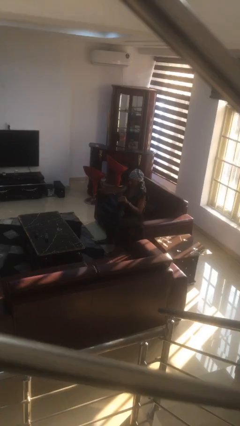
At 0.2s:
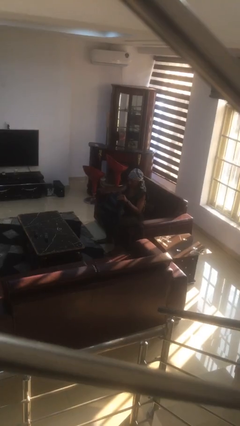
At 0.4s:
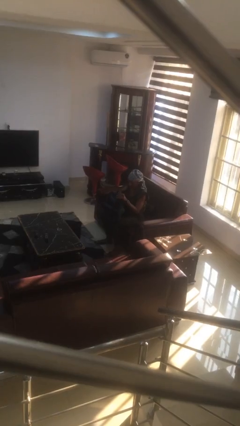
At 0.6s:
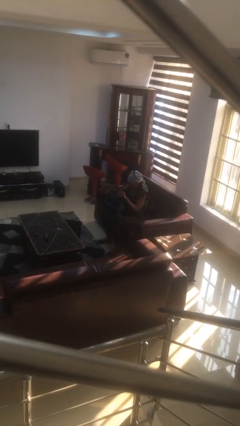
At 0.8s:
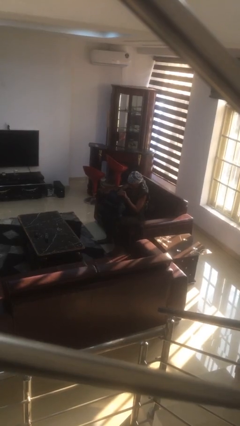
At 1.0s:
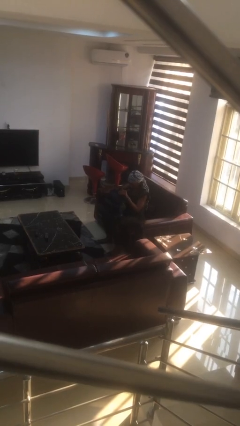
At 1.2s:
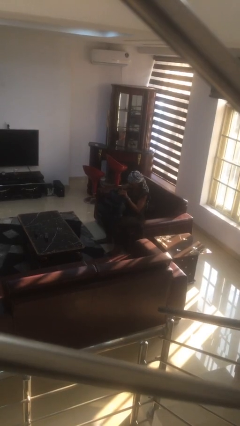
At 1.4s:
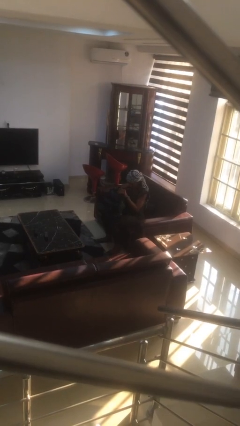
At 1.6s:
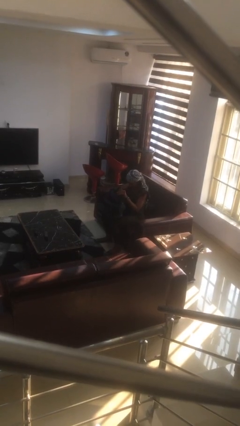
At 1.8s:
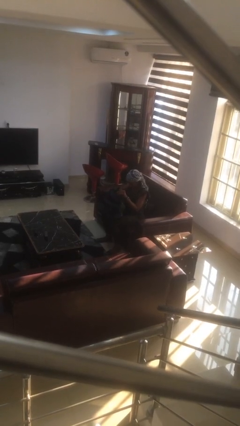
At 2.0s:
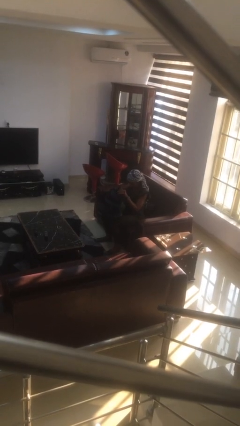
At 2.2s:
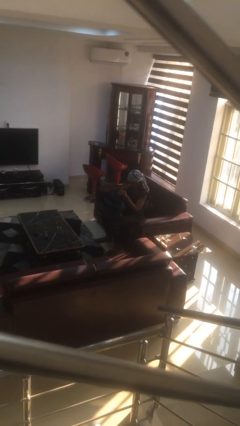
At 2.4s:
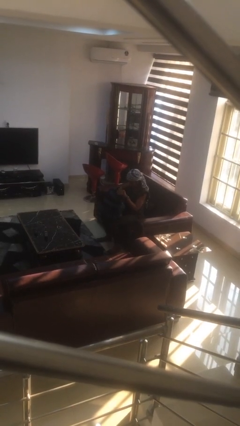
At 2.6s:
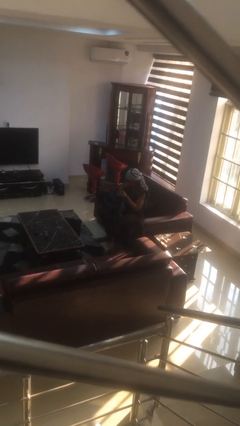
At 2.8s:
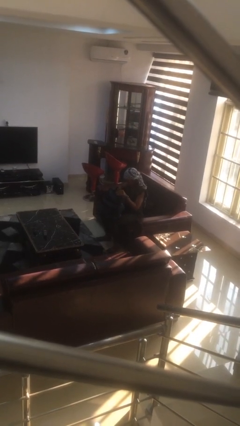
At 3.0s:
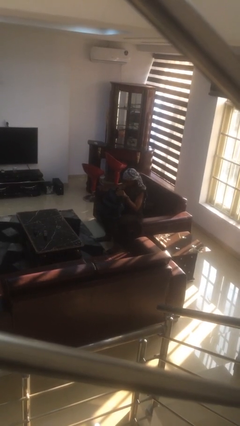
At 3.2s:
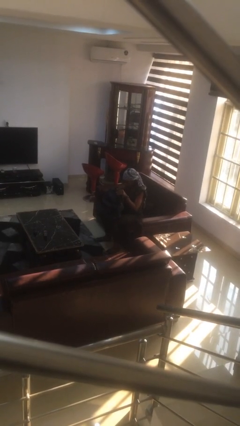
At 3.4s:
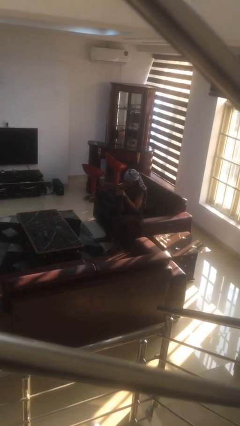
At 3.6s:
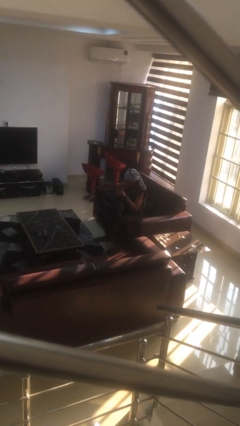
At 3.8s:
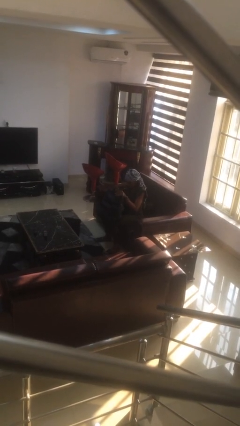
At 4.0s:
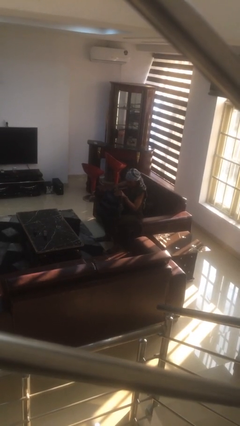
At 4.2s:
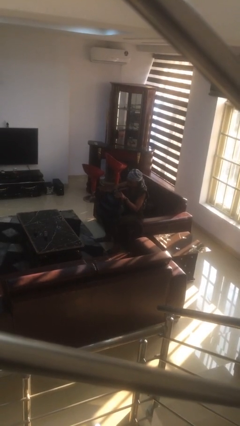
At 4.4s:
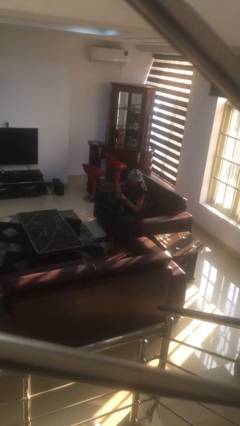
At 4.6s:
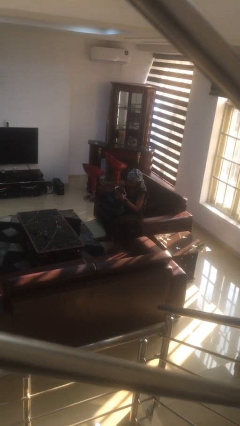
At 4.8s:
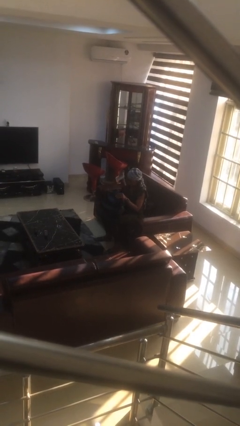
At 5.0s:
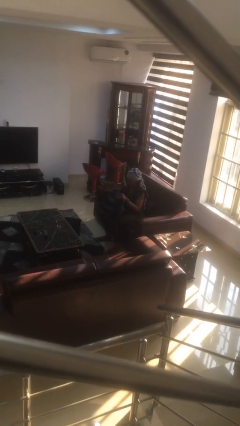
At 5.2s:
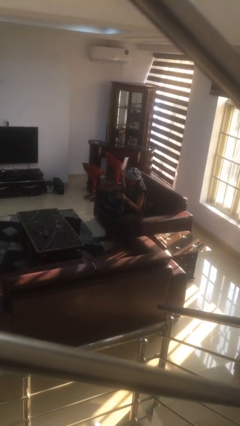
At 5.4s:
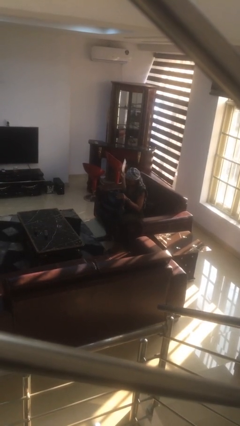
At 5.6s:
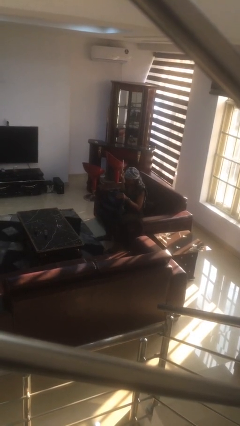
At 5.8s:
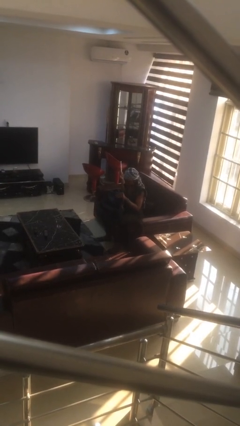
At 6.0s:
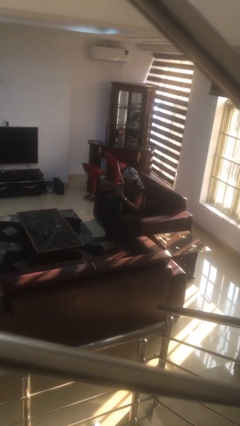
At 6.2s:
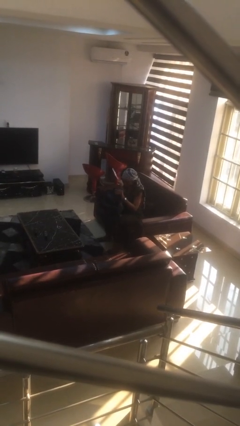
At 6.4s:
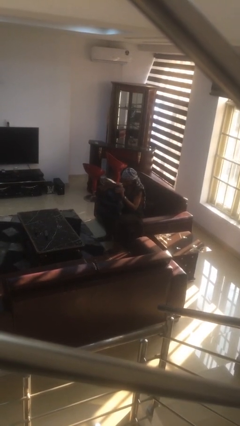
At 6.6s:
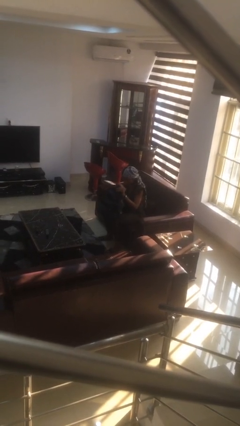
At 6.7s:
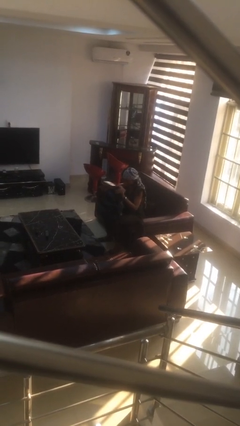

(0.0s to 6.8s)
person searches in backpack

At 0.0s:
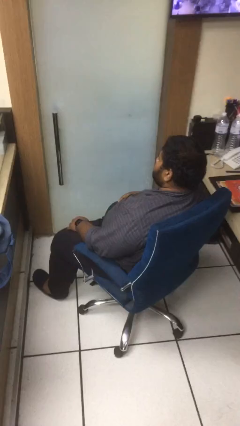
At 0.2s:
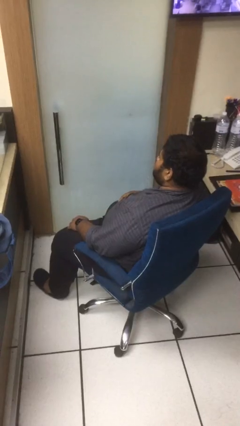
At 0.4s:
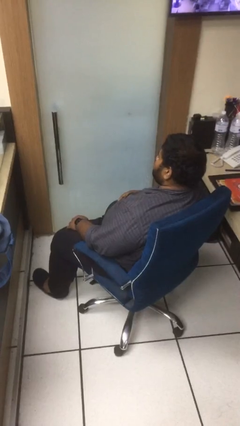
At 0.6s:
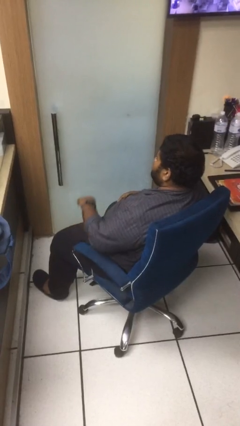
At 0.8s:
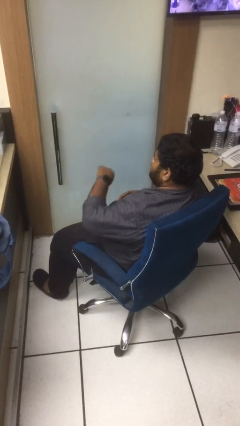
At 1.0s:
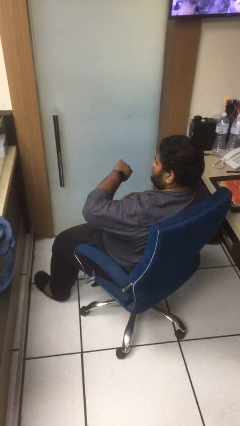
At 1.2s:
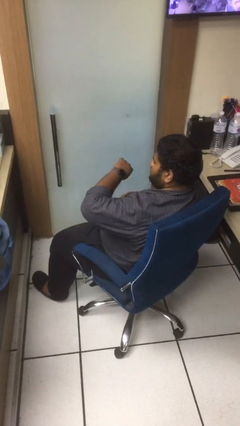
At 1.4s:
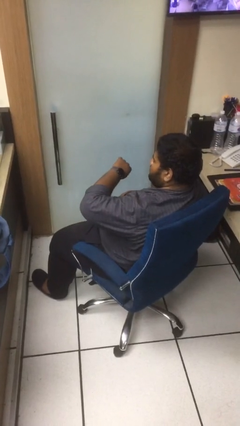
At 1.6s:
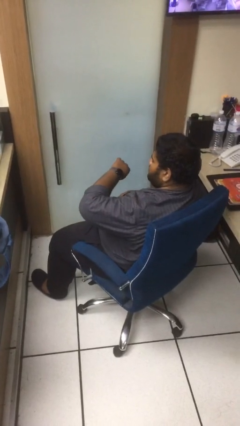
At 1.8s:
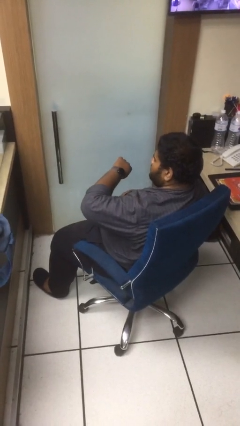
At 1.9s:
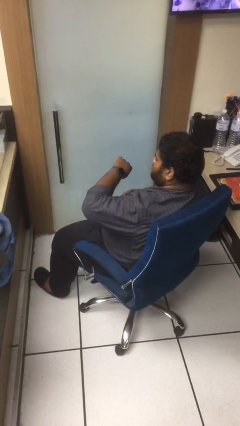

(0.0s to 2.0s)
person looks at wristwatch

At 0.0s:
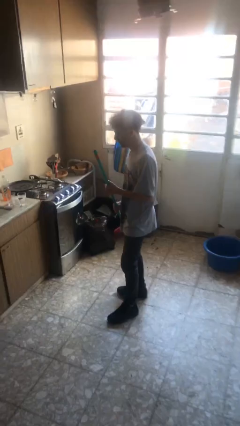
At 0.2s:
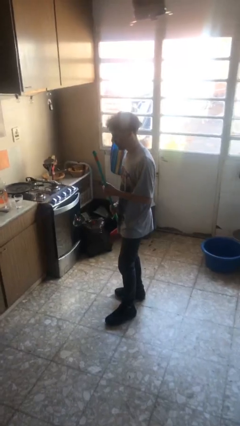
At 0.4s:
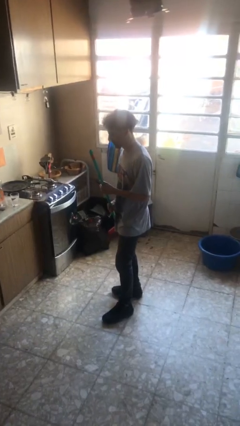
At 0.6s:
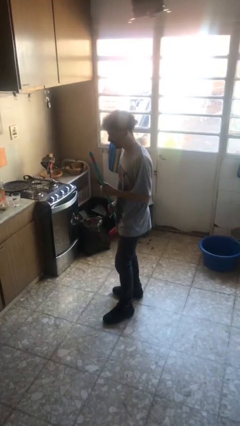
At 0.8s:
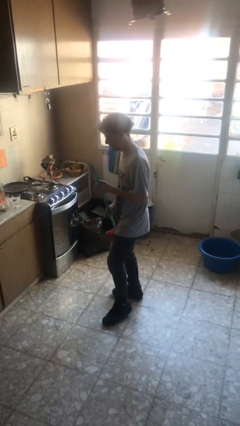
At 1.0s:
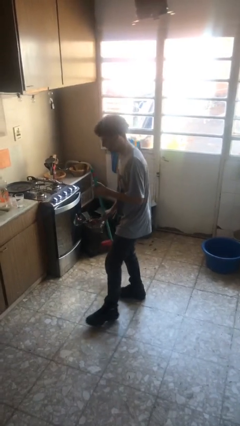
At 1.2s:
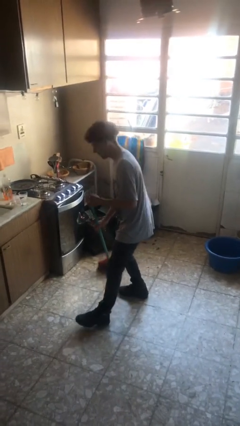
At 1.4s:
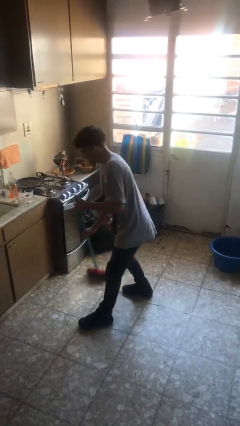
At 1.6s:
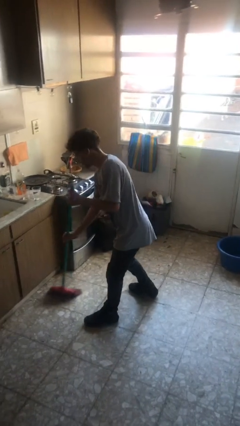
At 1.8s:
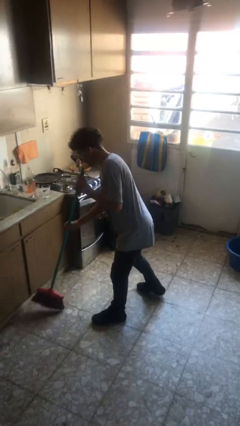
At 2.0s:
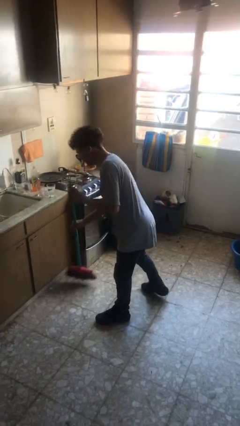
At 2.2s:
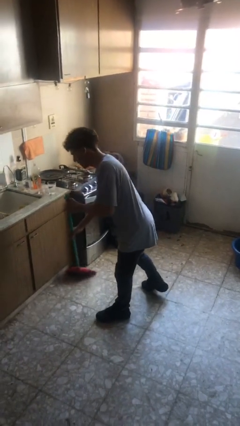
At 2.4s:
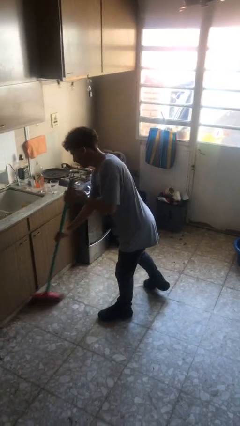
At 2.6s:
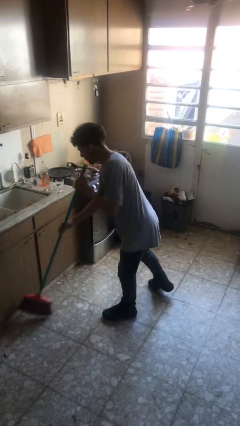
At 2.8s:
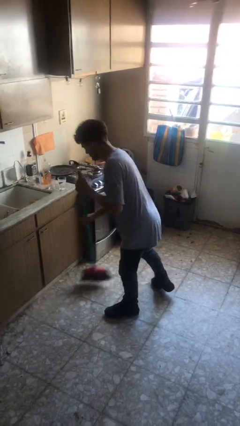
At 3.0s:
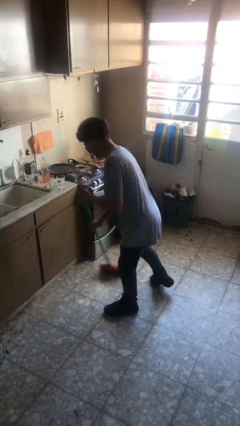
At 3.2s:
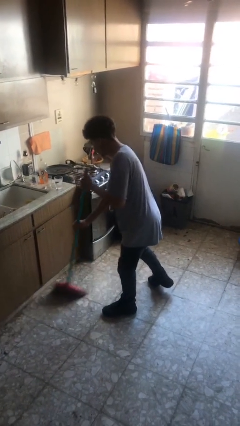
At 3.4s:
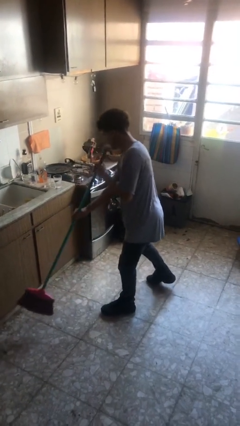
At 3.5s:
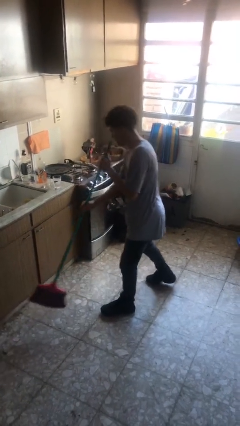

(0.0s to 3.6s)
person sweeps floor

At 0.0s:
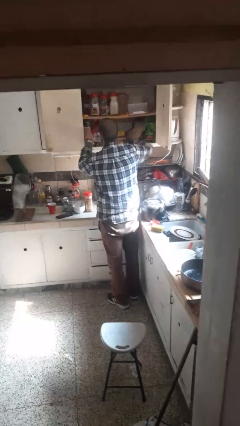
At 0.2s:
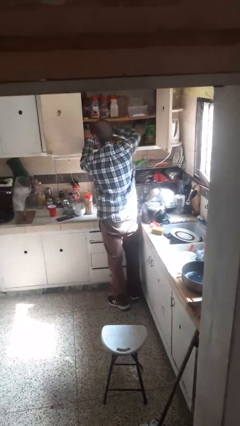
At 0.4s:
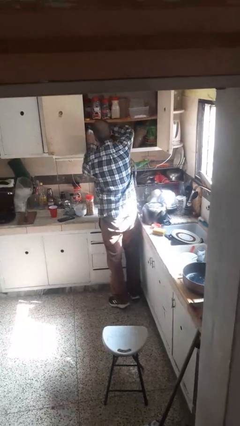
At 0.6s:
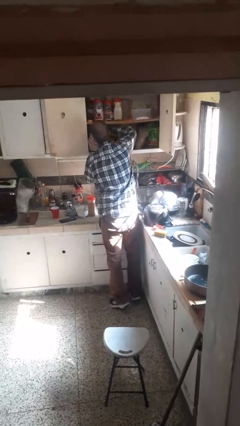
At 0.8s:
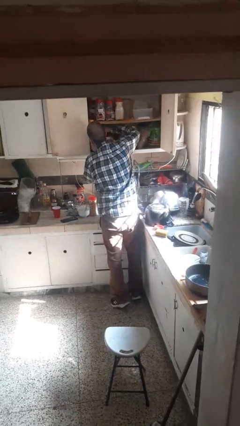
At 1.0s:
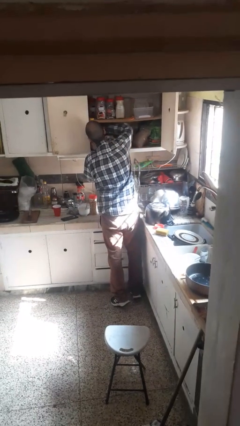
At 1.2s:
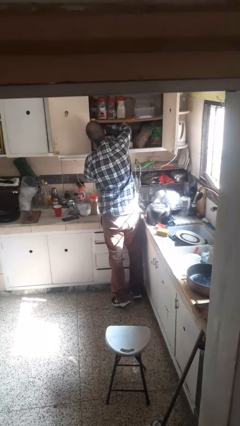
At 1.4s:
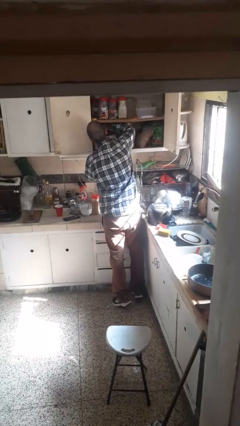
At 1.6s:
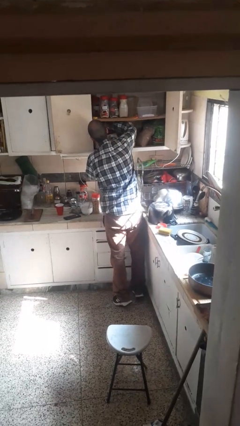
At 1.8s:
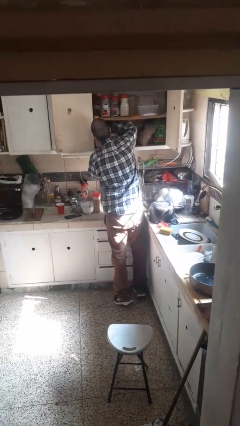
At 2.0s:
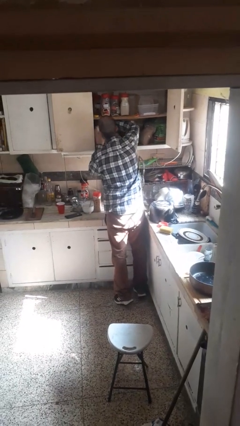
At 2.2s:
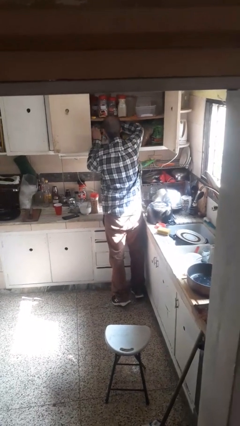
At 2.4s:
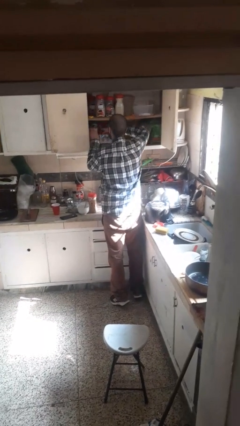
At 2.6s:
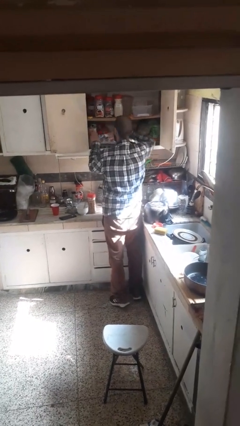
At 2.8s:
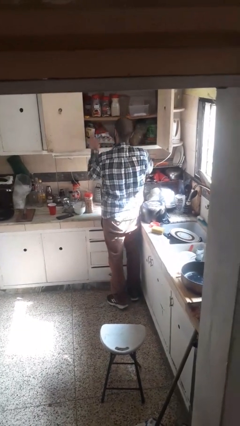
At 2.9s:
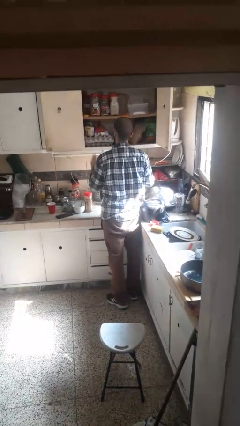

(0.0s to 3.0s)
person searches in cabinet

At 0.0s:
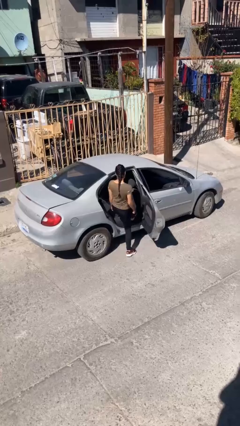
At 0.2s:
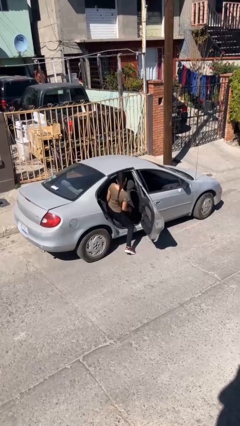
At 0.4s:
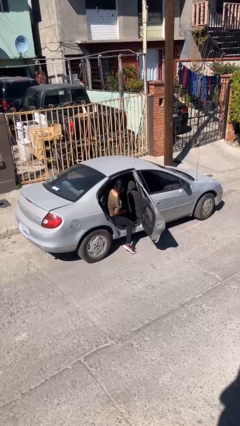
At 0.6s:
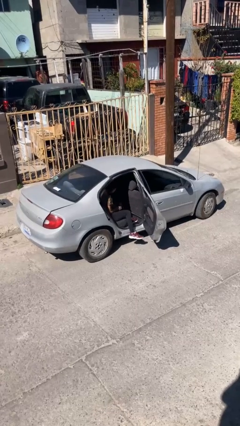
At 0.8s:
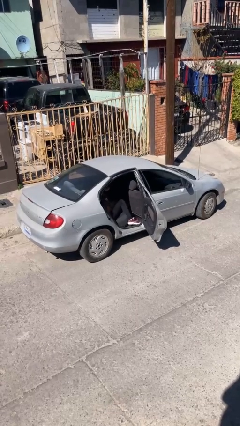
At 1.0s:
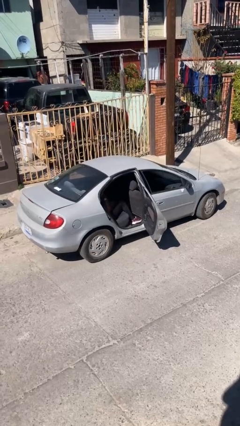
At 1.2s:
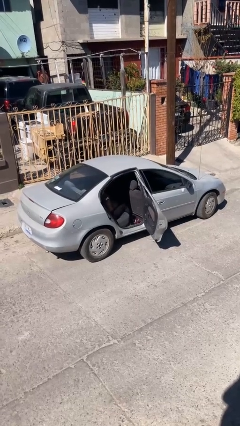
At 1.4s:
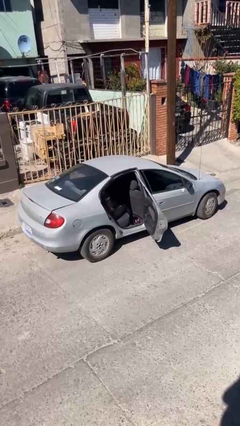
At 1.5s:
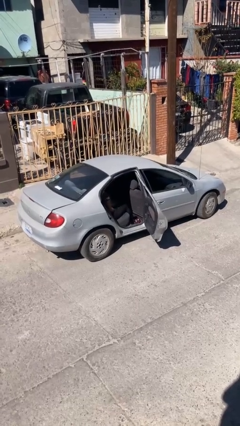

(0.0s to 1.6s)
person enters car

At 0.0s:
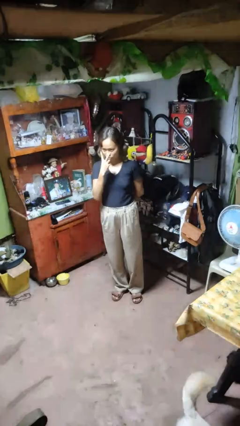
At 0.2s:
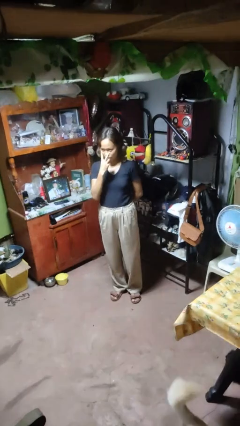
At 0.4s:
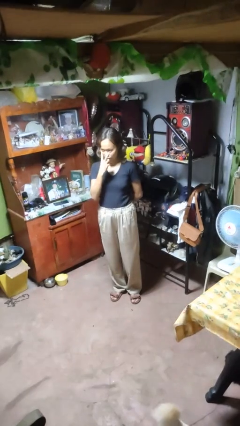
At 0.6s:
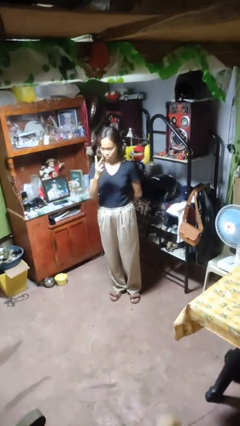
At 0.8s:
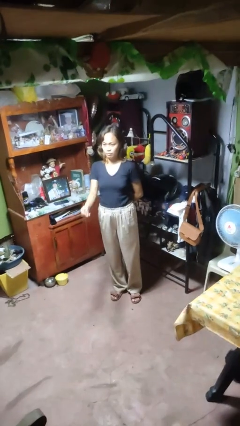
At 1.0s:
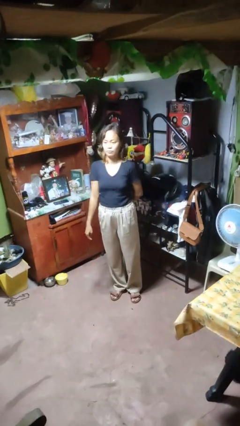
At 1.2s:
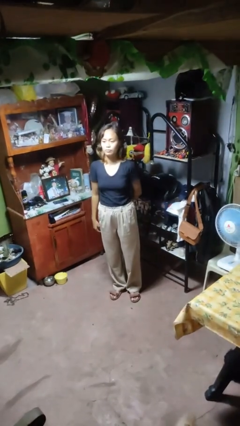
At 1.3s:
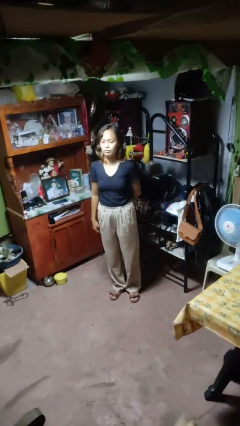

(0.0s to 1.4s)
person gestures watch closely
